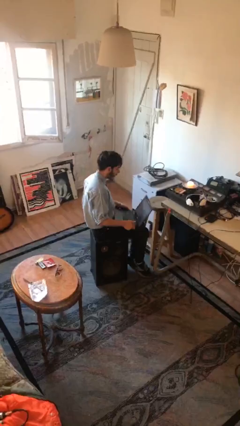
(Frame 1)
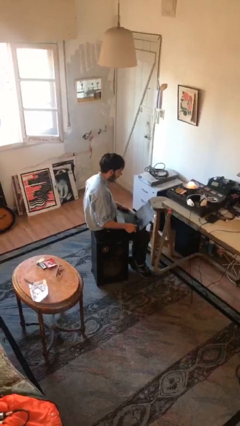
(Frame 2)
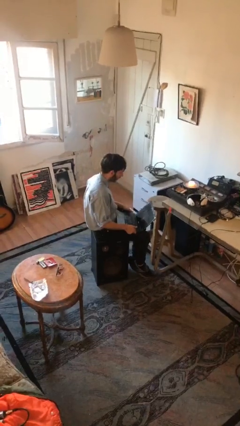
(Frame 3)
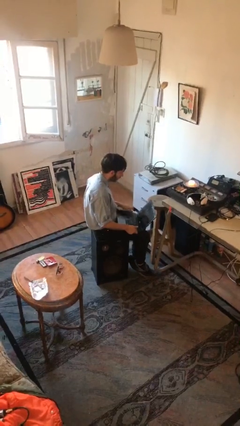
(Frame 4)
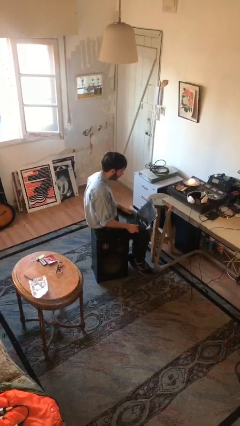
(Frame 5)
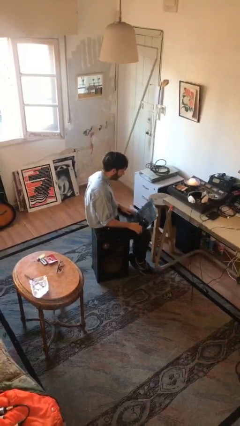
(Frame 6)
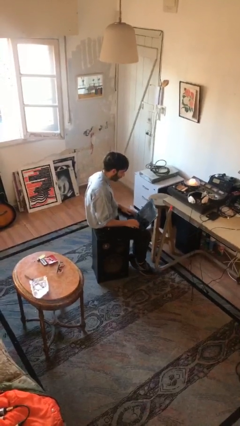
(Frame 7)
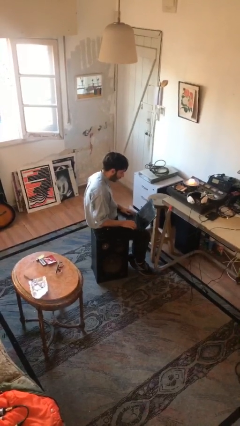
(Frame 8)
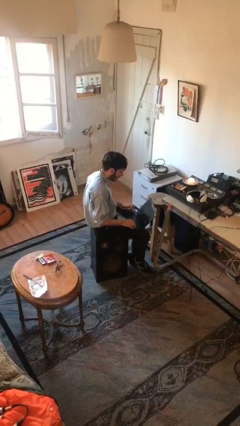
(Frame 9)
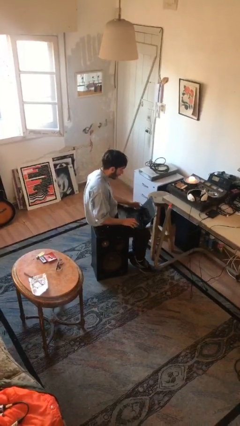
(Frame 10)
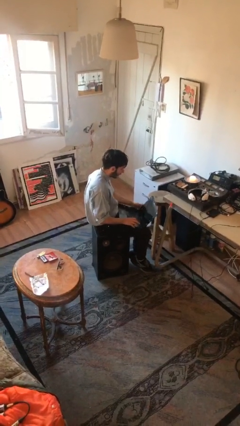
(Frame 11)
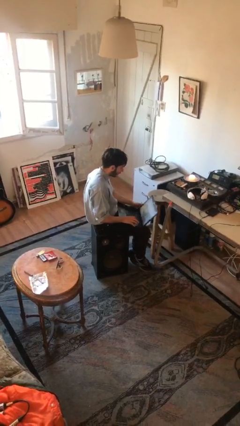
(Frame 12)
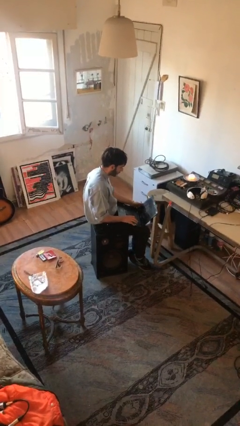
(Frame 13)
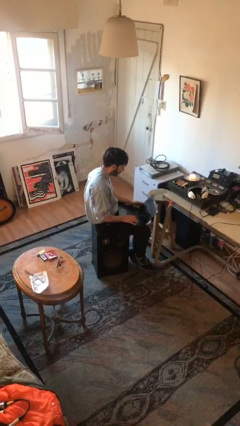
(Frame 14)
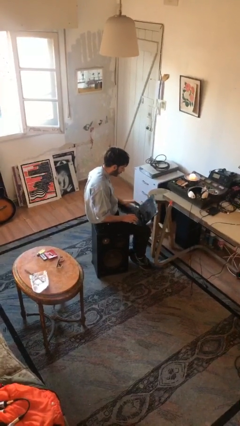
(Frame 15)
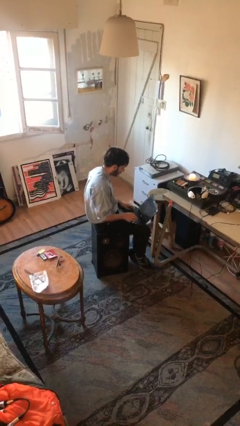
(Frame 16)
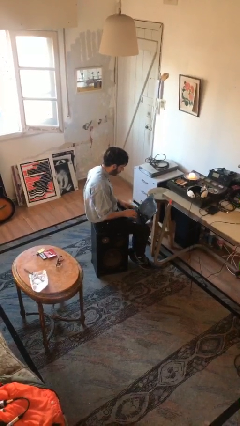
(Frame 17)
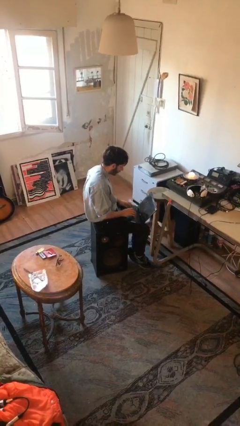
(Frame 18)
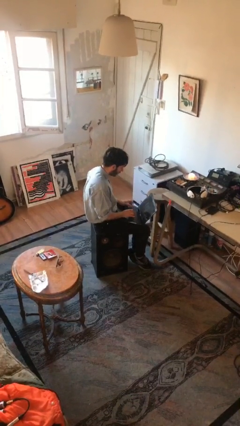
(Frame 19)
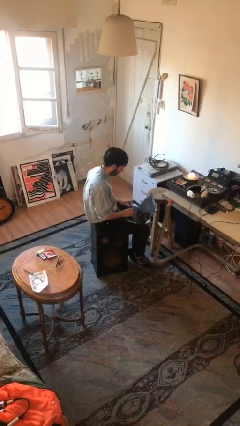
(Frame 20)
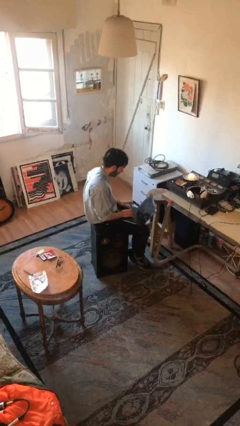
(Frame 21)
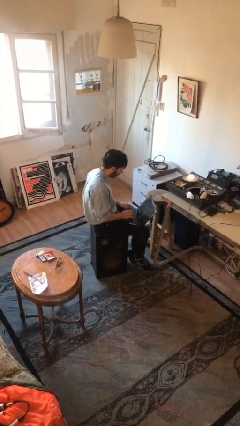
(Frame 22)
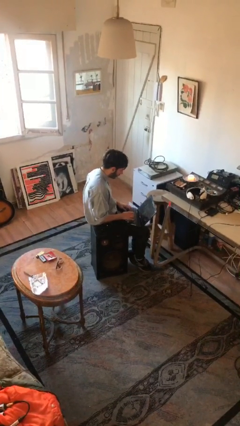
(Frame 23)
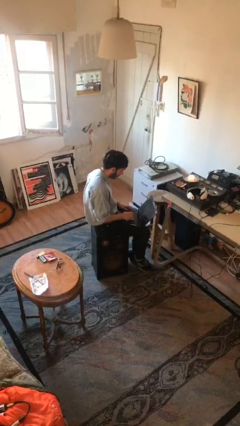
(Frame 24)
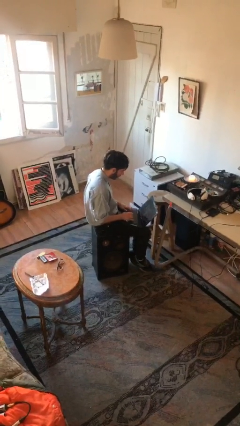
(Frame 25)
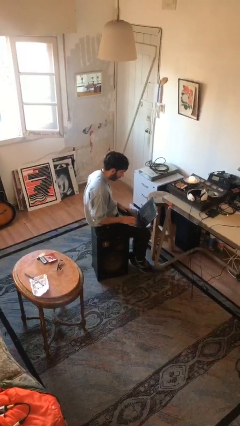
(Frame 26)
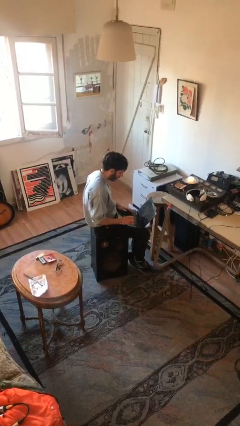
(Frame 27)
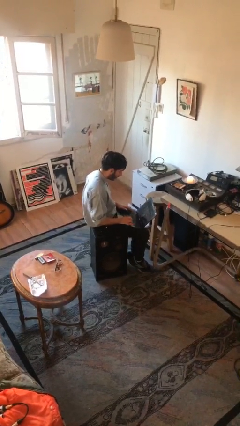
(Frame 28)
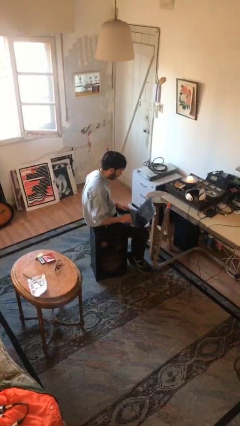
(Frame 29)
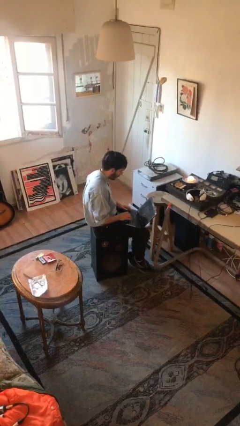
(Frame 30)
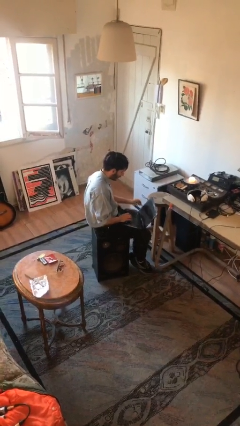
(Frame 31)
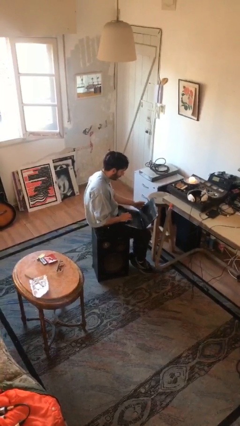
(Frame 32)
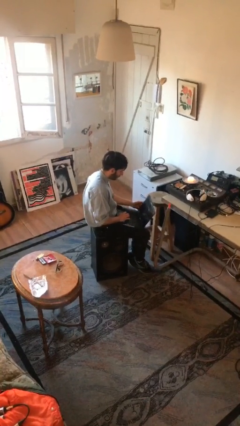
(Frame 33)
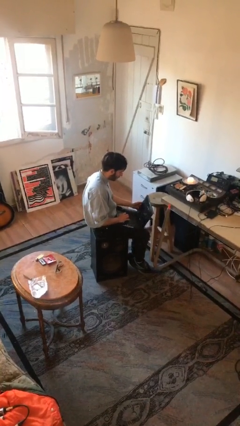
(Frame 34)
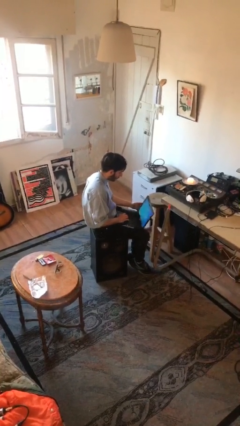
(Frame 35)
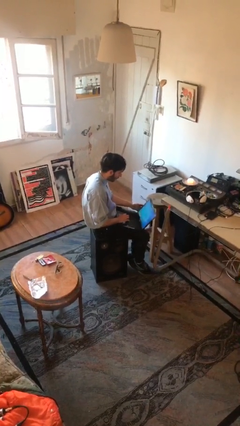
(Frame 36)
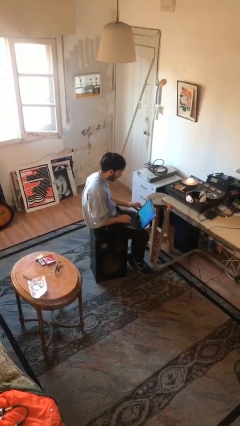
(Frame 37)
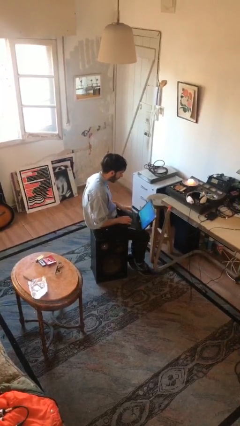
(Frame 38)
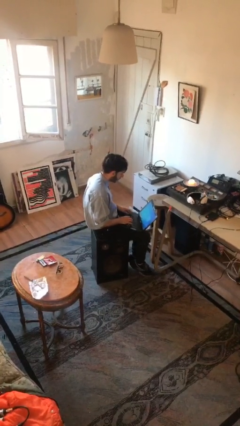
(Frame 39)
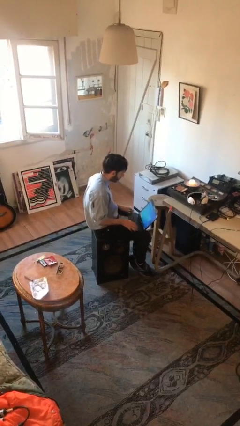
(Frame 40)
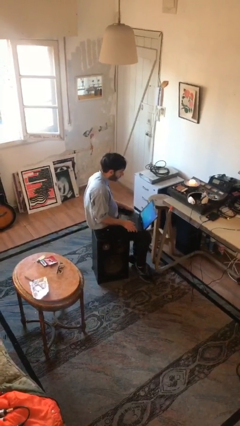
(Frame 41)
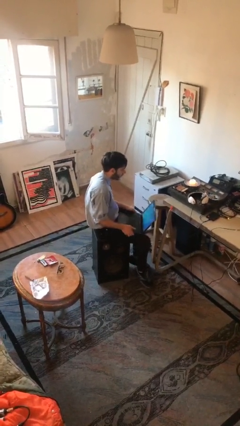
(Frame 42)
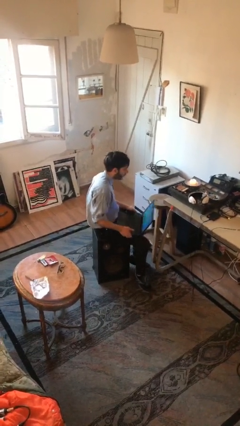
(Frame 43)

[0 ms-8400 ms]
person interacts with laptop

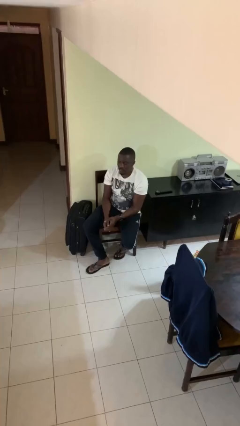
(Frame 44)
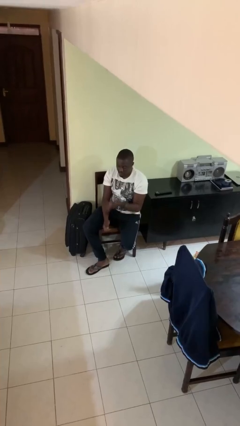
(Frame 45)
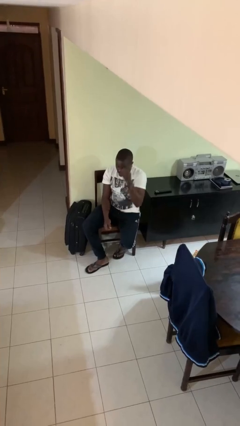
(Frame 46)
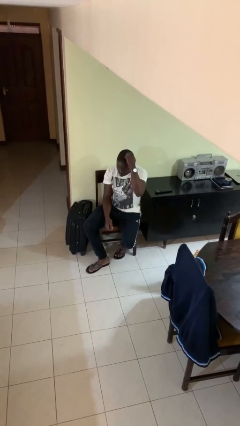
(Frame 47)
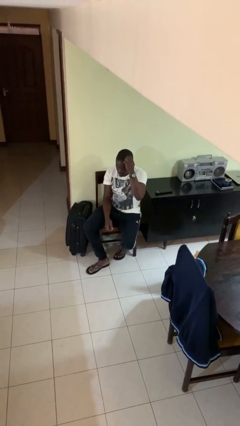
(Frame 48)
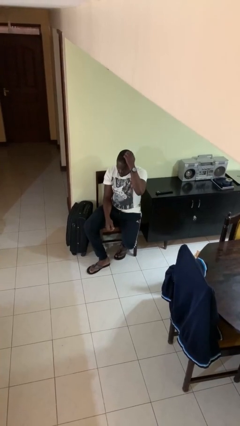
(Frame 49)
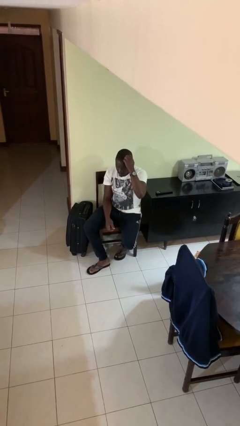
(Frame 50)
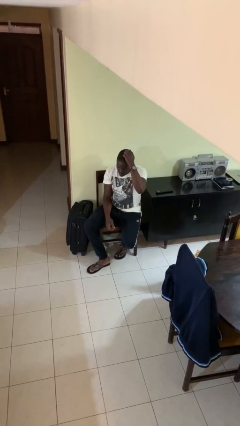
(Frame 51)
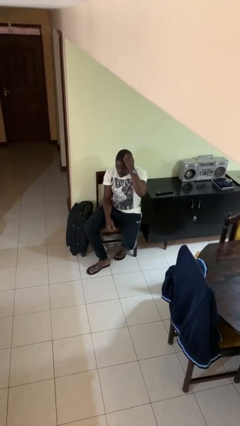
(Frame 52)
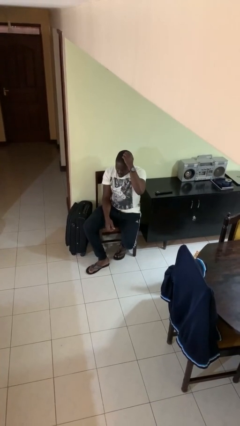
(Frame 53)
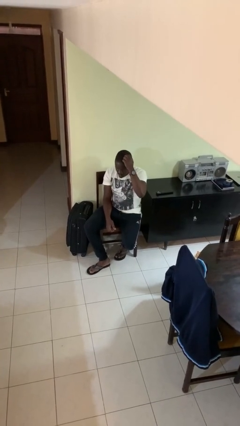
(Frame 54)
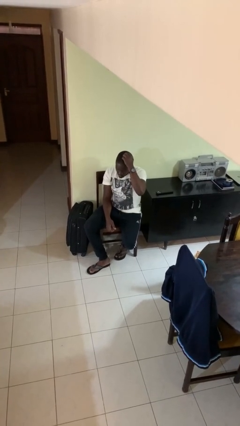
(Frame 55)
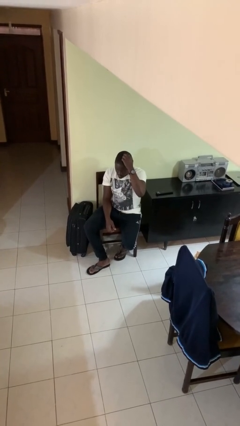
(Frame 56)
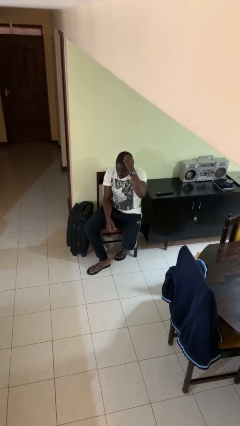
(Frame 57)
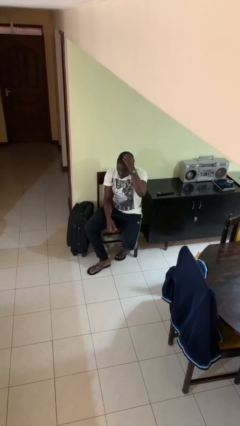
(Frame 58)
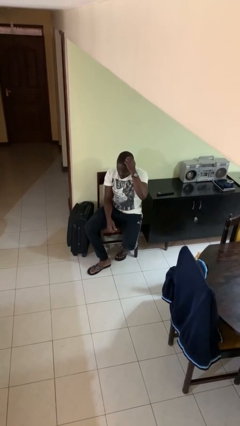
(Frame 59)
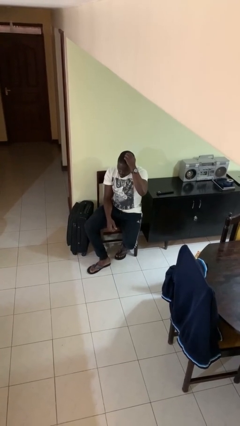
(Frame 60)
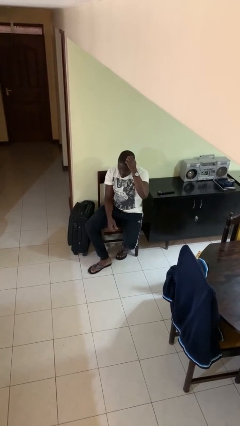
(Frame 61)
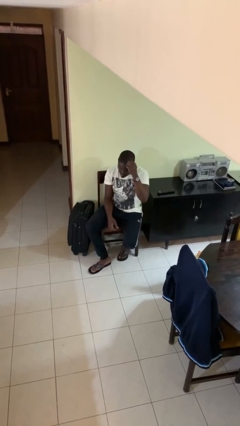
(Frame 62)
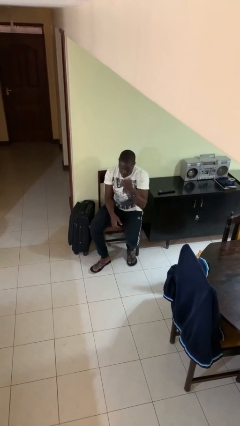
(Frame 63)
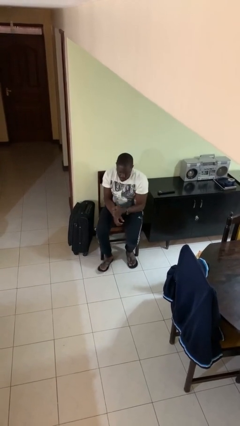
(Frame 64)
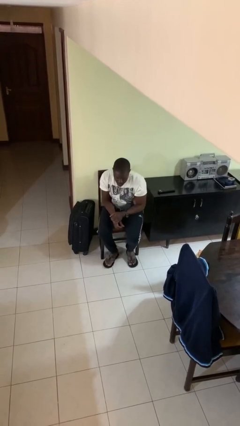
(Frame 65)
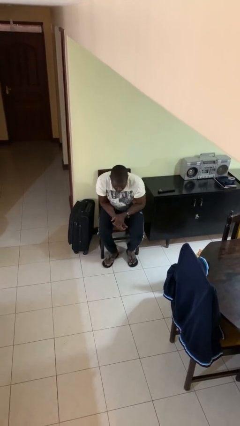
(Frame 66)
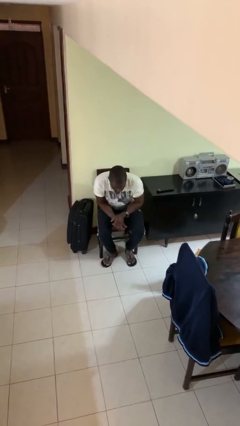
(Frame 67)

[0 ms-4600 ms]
person scratches face

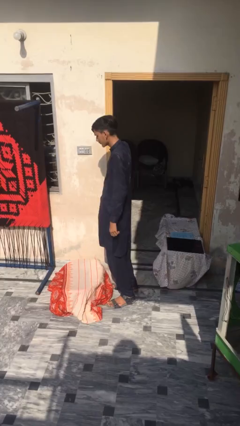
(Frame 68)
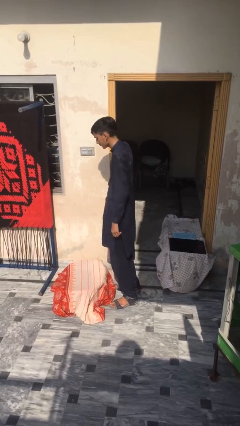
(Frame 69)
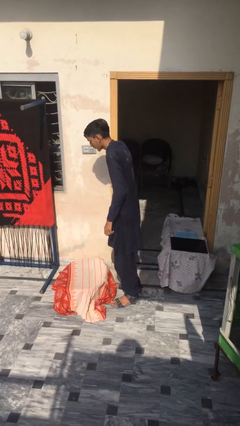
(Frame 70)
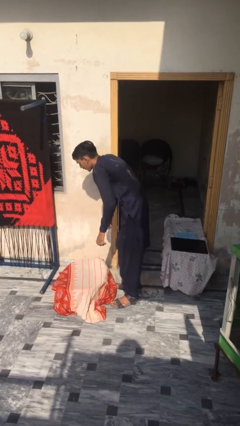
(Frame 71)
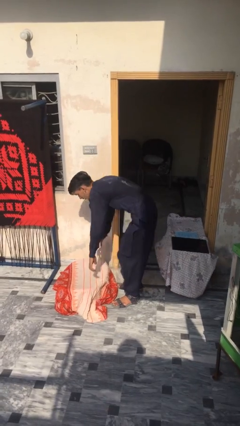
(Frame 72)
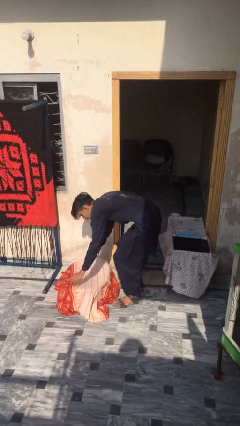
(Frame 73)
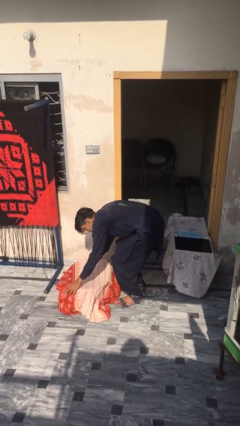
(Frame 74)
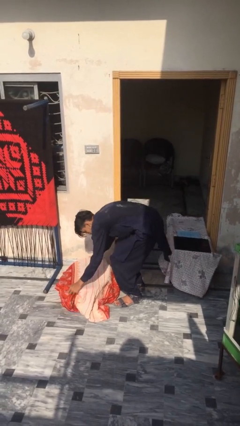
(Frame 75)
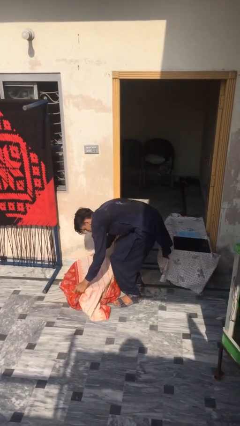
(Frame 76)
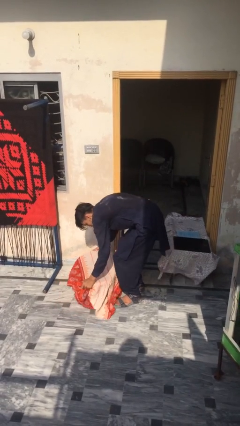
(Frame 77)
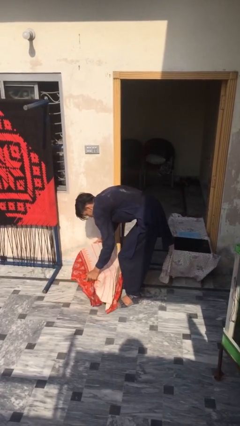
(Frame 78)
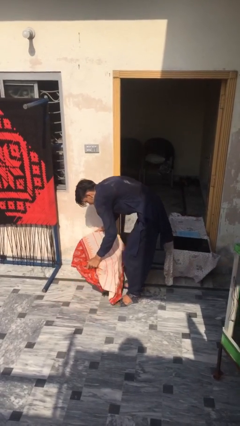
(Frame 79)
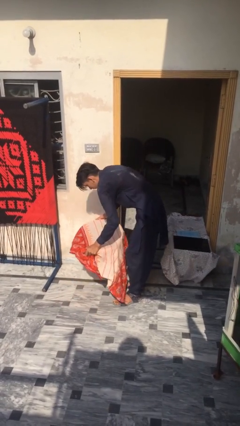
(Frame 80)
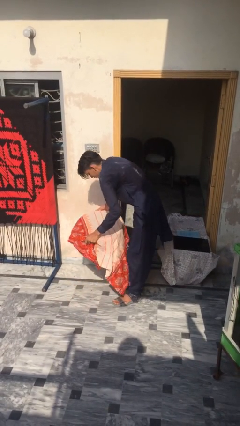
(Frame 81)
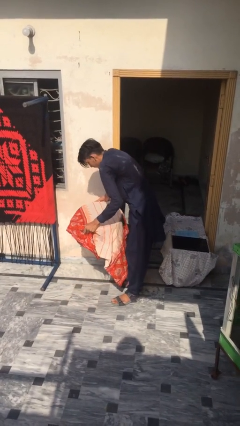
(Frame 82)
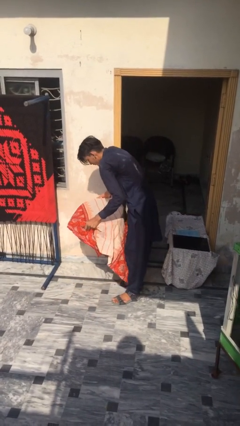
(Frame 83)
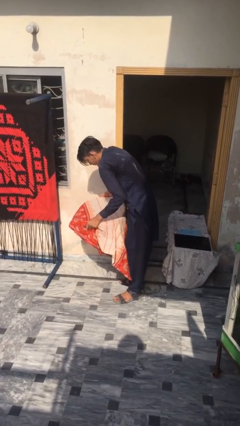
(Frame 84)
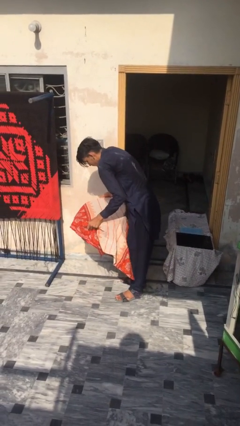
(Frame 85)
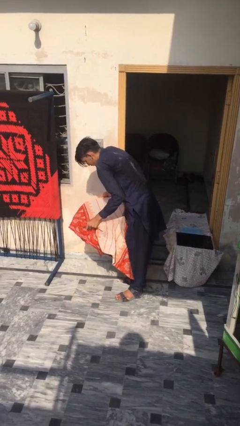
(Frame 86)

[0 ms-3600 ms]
person picks up object from floor

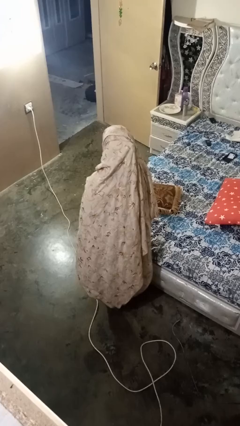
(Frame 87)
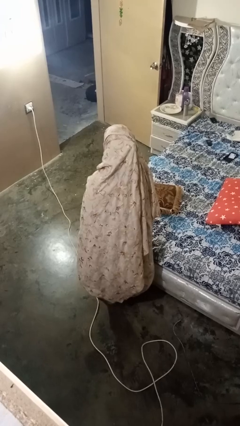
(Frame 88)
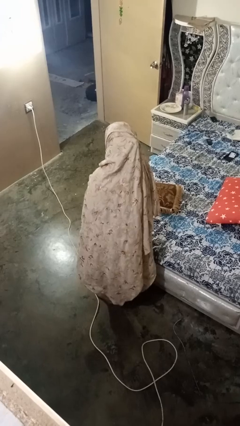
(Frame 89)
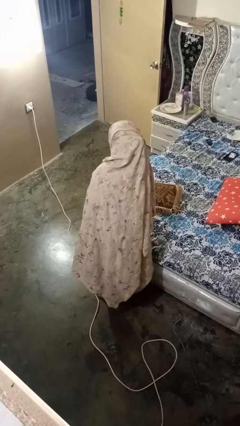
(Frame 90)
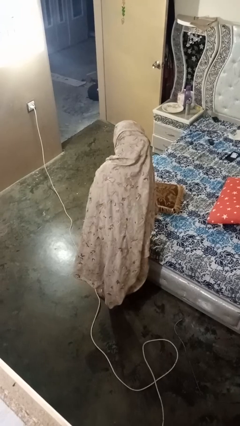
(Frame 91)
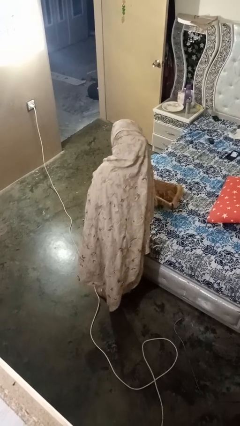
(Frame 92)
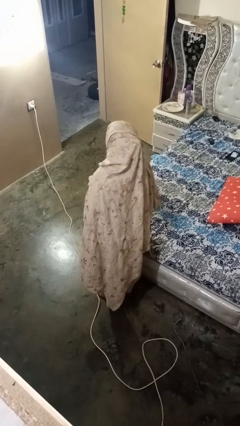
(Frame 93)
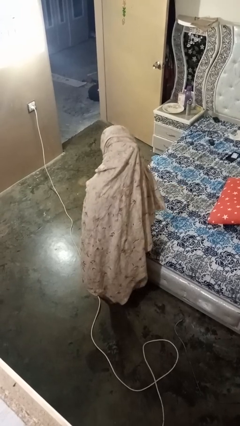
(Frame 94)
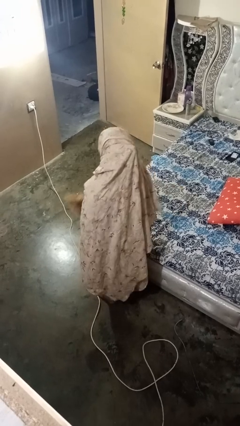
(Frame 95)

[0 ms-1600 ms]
person picks up object from bed
